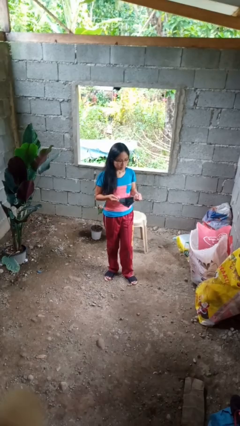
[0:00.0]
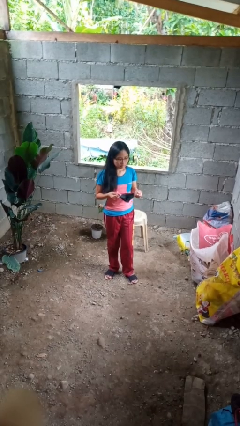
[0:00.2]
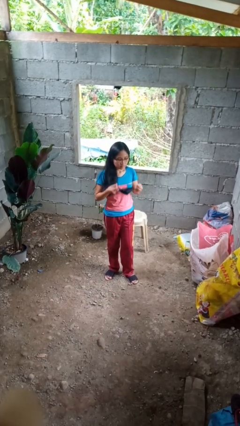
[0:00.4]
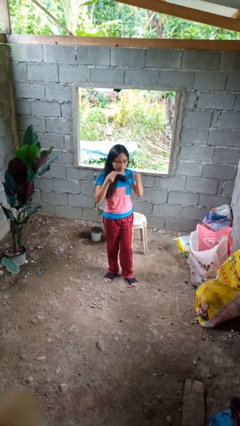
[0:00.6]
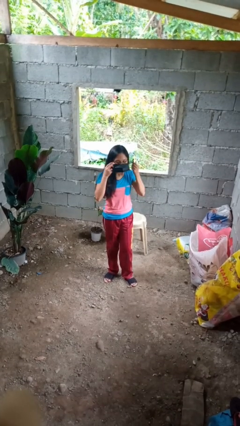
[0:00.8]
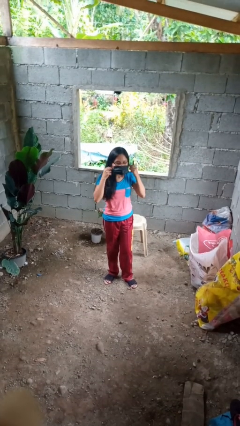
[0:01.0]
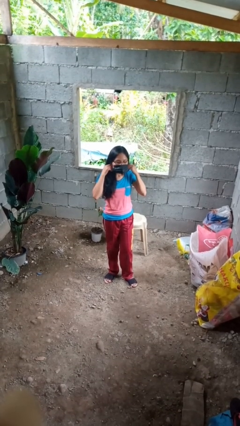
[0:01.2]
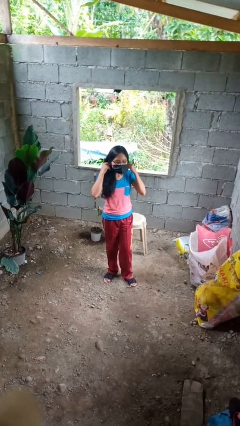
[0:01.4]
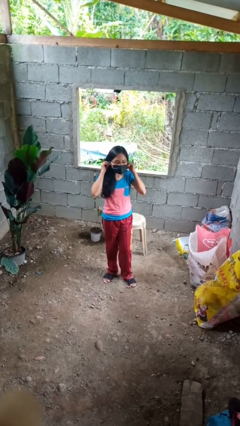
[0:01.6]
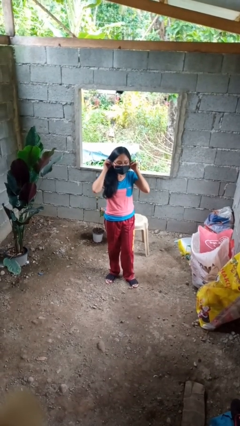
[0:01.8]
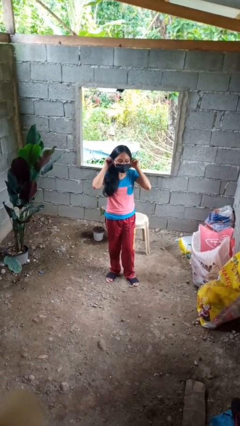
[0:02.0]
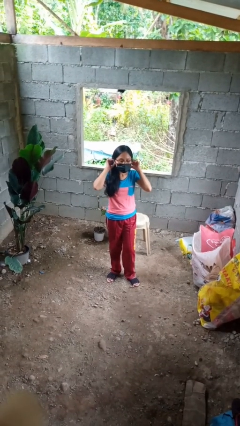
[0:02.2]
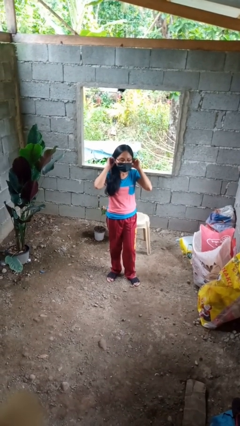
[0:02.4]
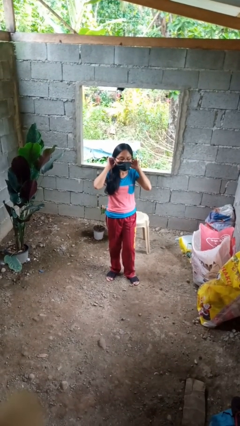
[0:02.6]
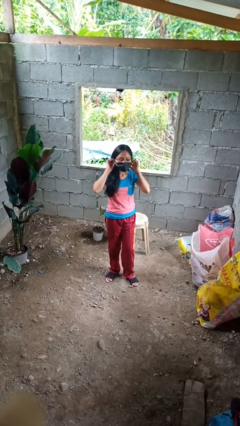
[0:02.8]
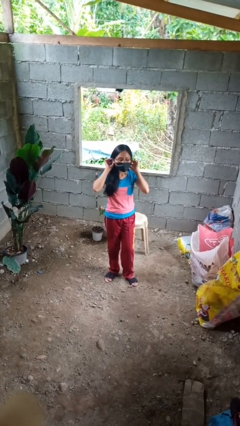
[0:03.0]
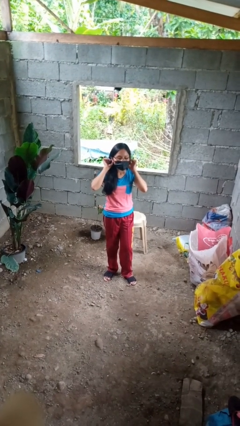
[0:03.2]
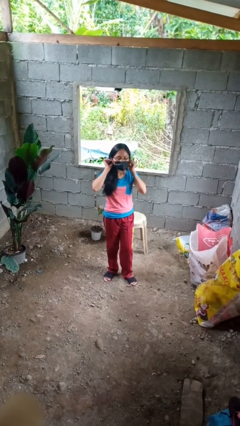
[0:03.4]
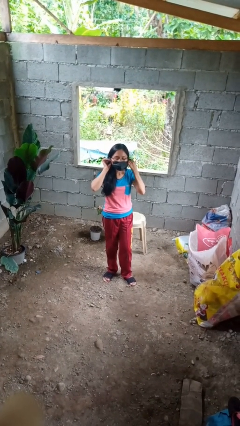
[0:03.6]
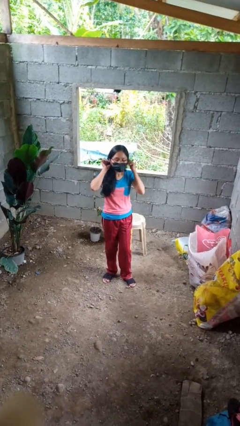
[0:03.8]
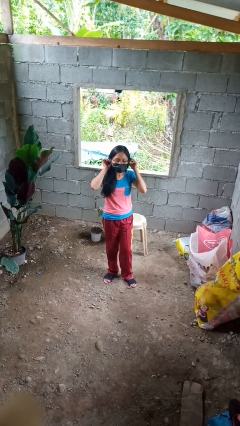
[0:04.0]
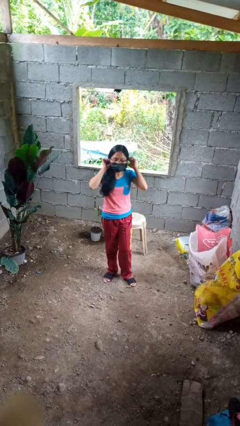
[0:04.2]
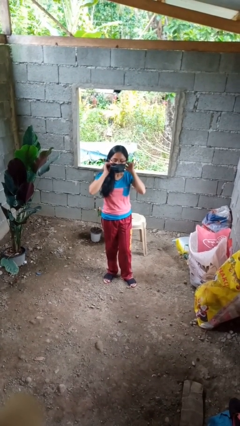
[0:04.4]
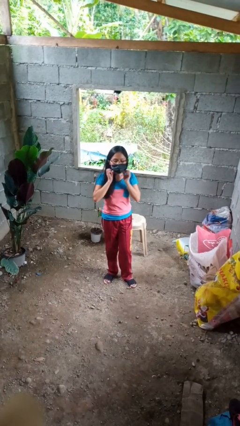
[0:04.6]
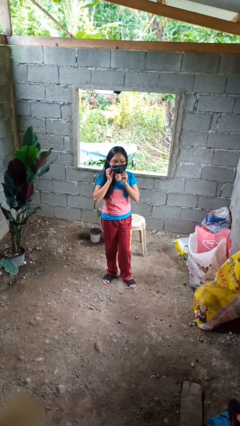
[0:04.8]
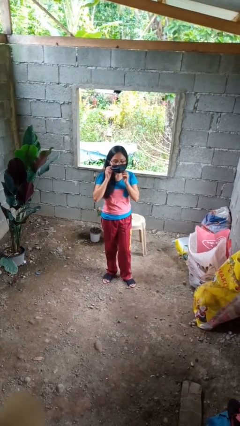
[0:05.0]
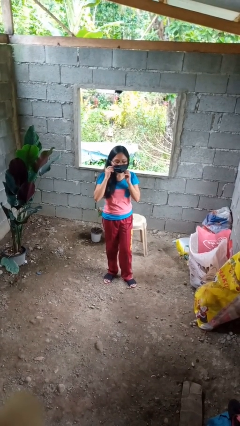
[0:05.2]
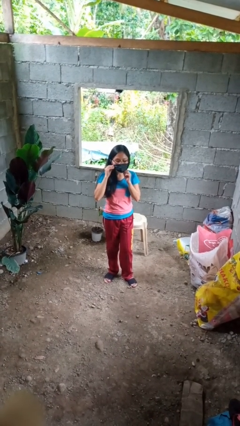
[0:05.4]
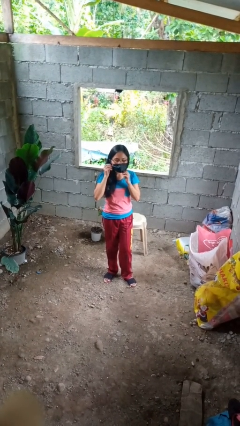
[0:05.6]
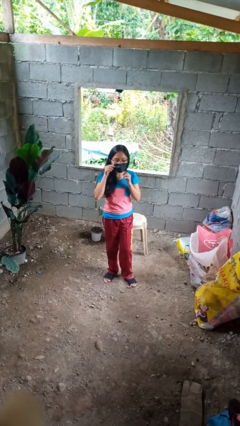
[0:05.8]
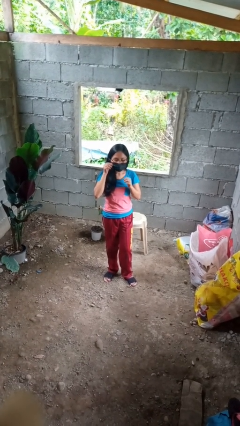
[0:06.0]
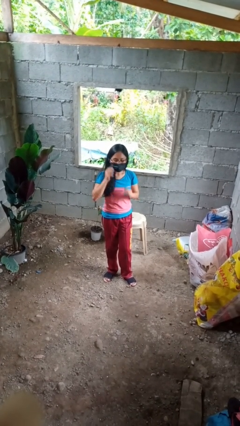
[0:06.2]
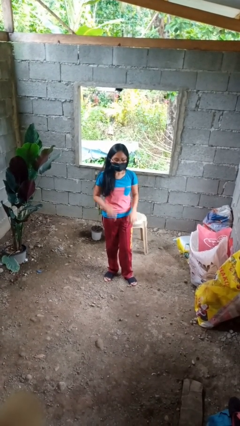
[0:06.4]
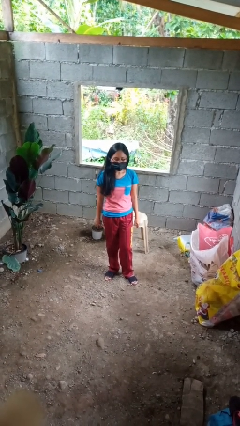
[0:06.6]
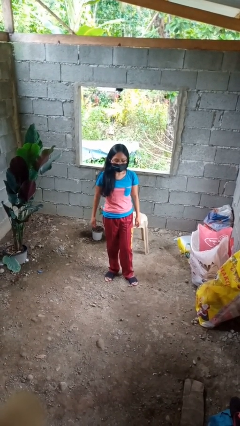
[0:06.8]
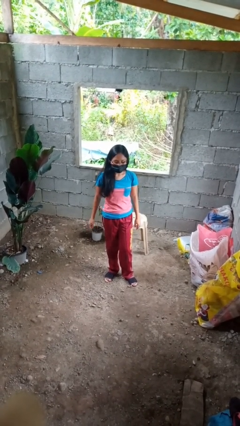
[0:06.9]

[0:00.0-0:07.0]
person puts on facemask

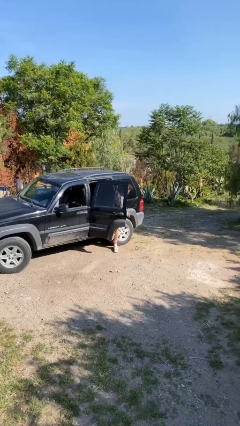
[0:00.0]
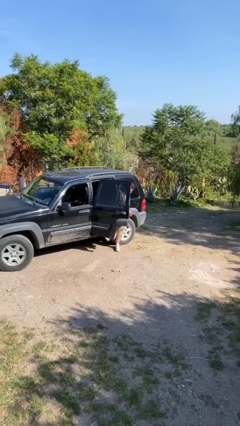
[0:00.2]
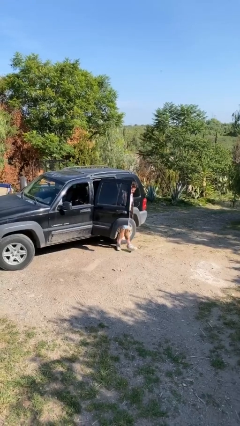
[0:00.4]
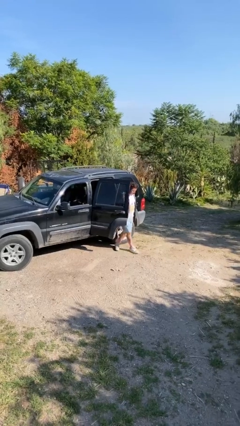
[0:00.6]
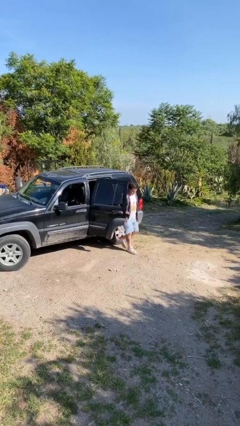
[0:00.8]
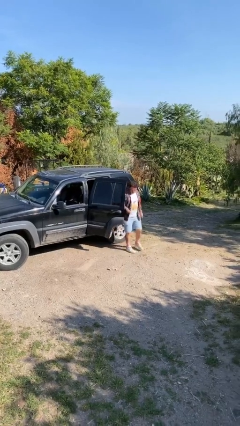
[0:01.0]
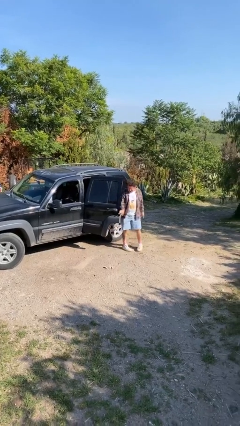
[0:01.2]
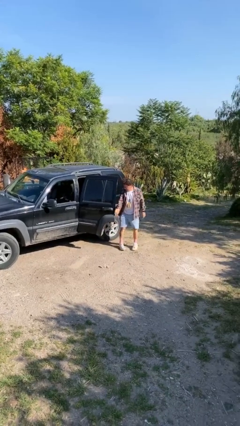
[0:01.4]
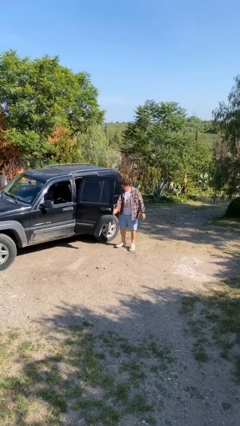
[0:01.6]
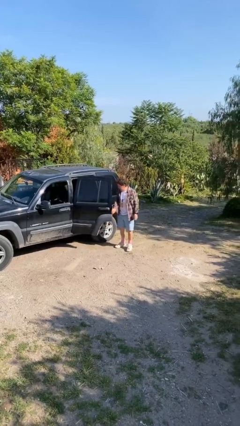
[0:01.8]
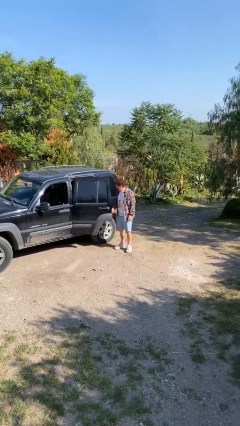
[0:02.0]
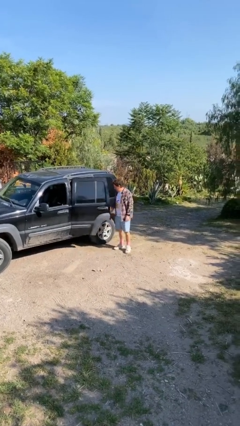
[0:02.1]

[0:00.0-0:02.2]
person exits car

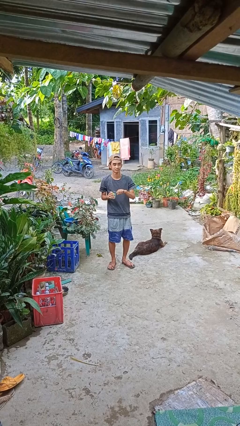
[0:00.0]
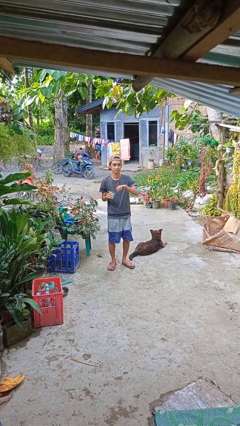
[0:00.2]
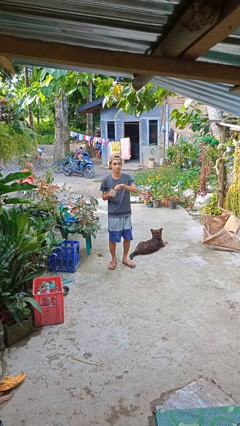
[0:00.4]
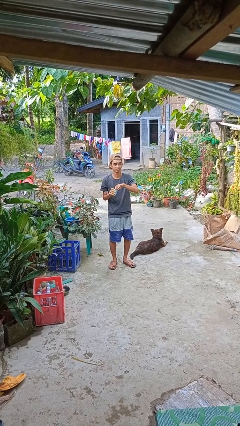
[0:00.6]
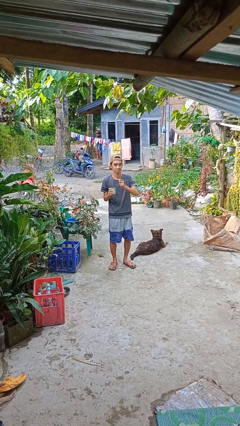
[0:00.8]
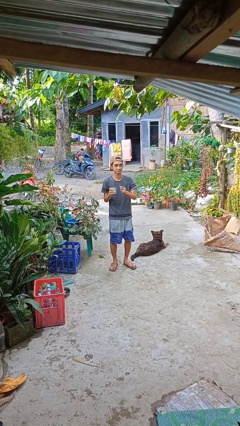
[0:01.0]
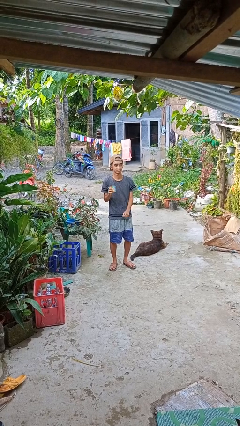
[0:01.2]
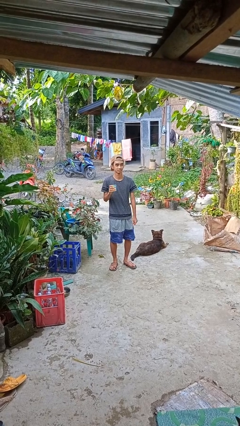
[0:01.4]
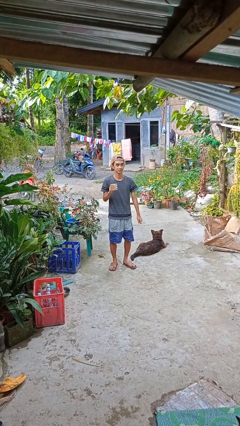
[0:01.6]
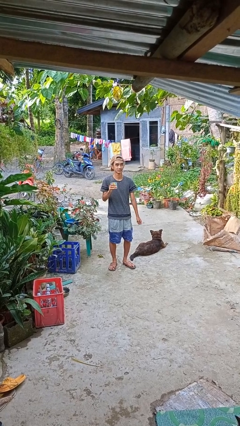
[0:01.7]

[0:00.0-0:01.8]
person opens beverage can

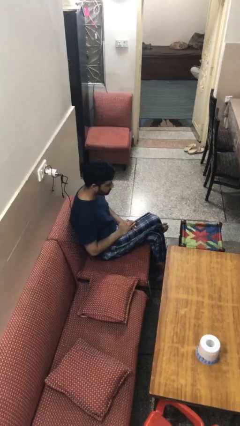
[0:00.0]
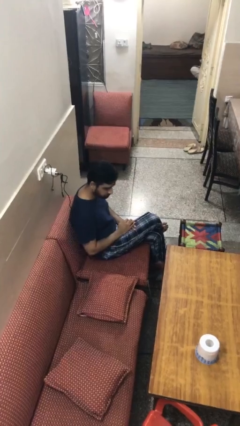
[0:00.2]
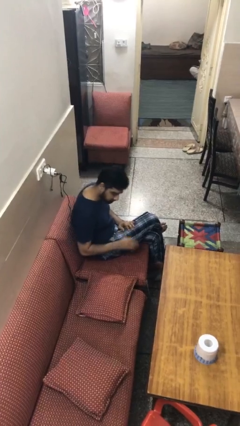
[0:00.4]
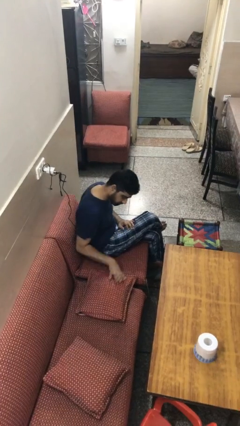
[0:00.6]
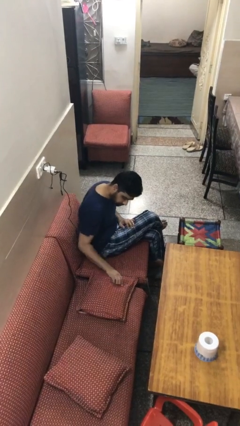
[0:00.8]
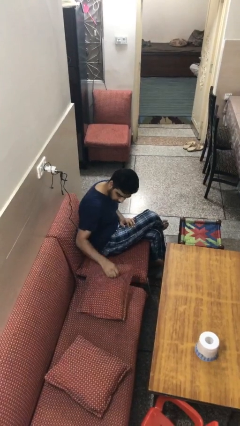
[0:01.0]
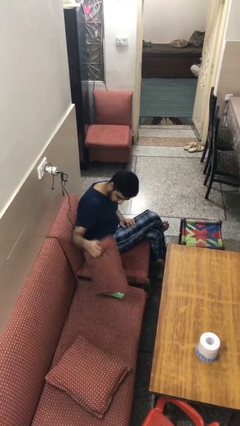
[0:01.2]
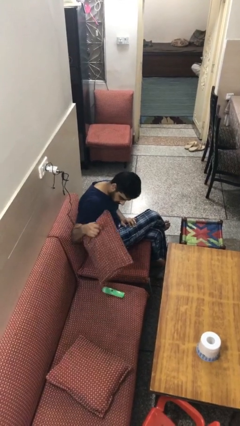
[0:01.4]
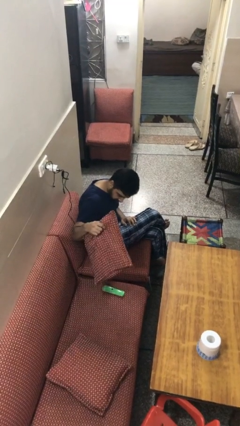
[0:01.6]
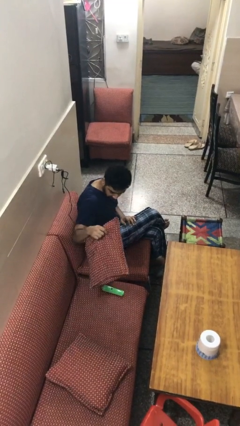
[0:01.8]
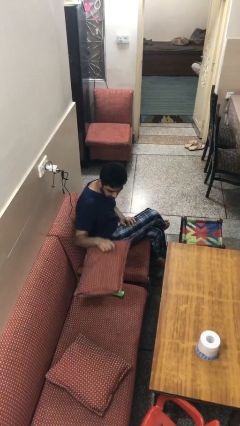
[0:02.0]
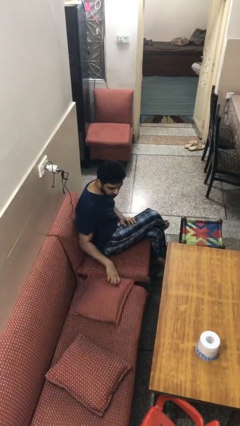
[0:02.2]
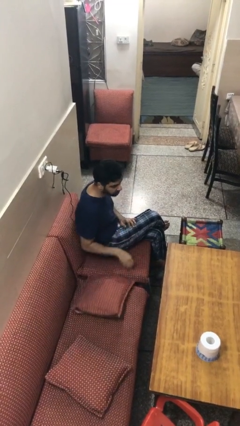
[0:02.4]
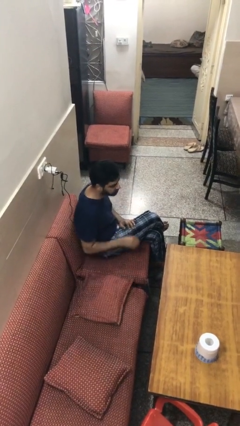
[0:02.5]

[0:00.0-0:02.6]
person searches in couch

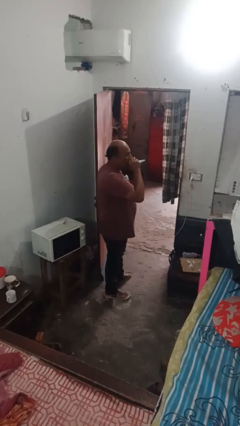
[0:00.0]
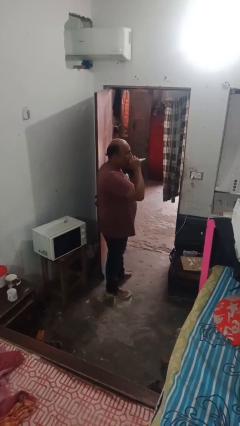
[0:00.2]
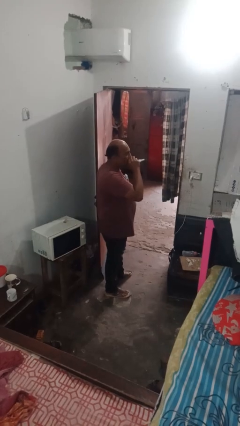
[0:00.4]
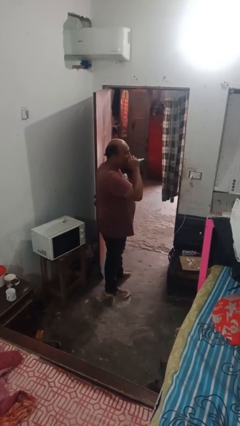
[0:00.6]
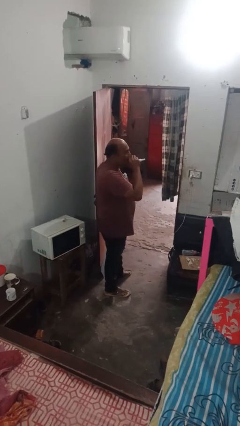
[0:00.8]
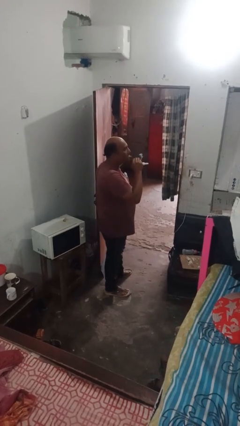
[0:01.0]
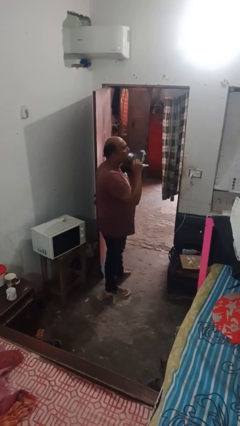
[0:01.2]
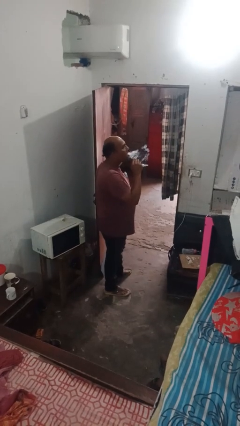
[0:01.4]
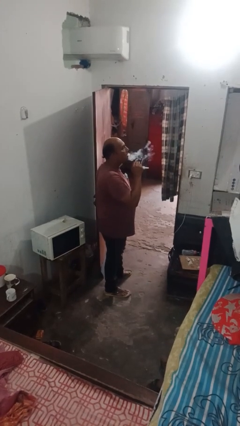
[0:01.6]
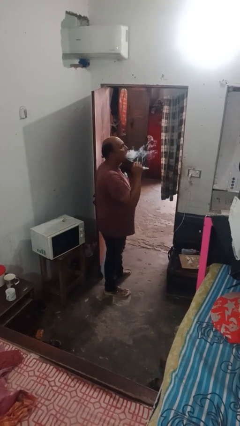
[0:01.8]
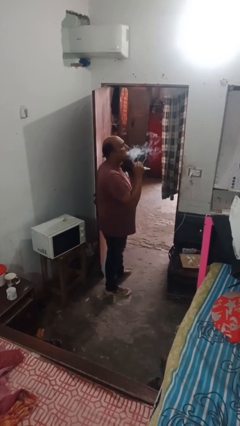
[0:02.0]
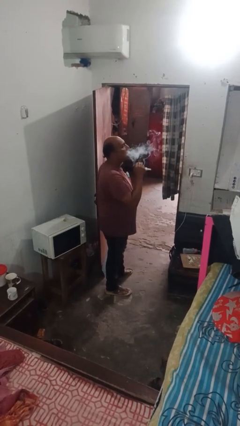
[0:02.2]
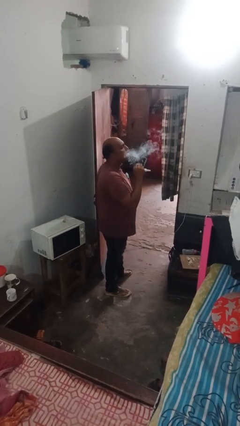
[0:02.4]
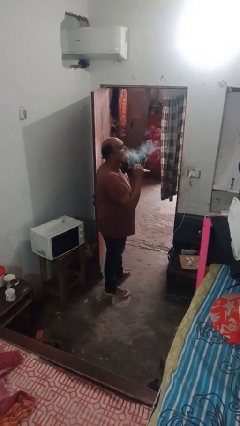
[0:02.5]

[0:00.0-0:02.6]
person vapes

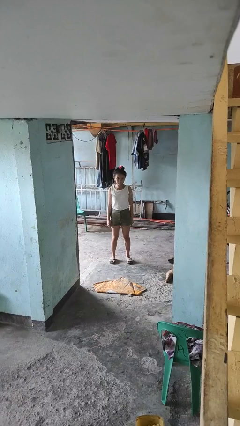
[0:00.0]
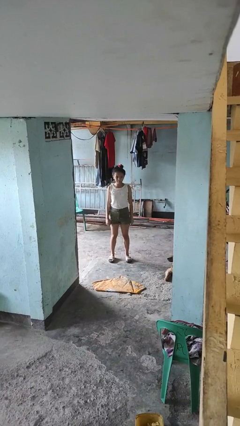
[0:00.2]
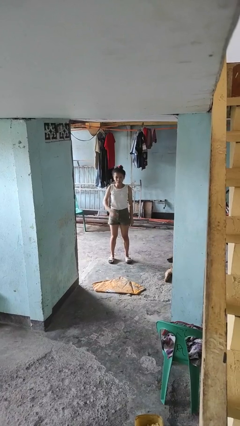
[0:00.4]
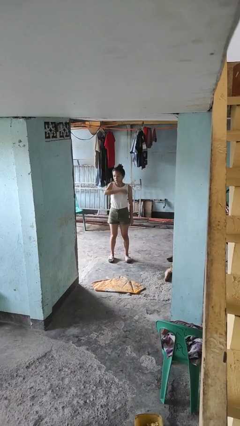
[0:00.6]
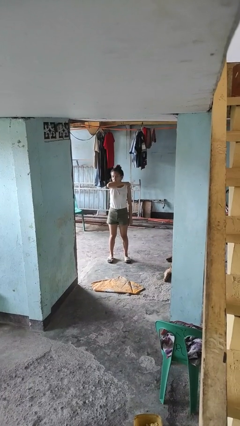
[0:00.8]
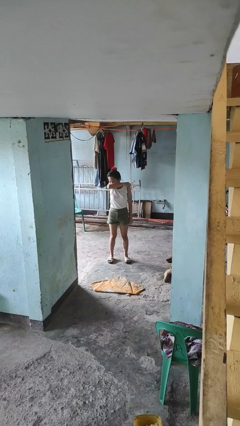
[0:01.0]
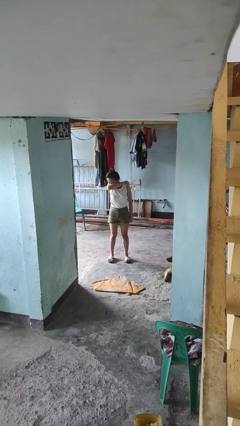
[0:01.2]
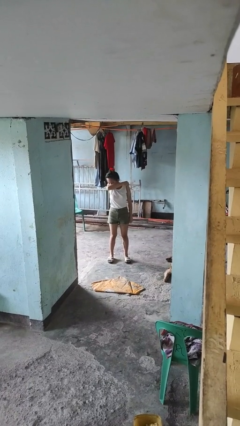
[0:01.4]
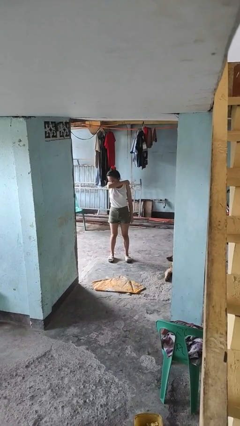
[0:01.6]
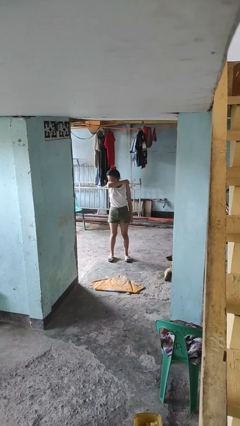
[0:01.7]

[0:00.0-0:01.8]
person sneezes into arm
